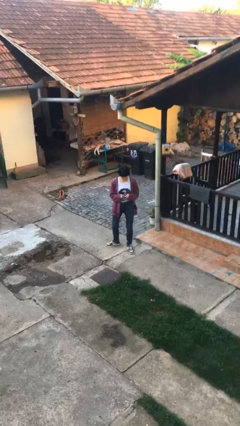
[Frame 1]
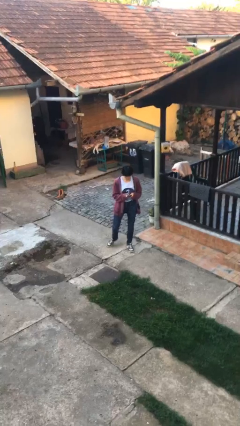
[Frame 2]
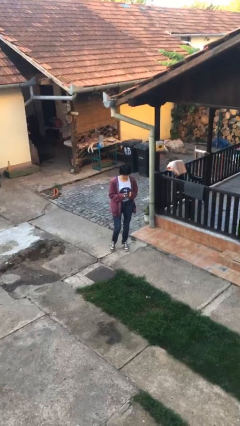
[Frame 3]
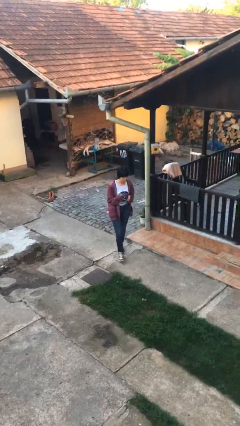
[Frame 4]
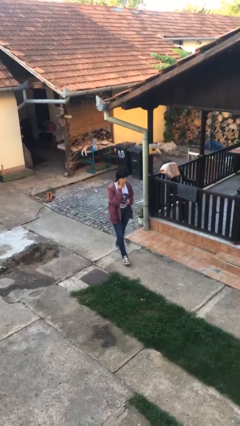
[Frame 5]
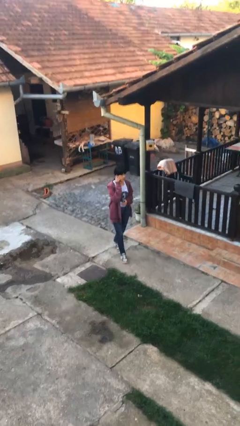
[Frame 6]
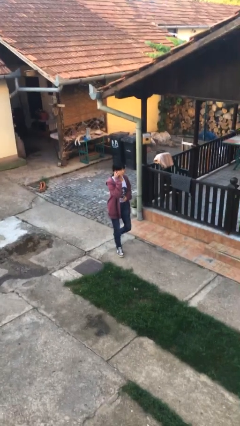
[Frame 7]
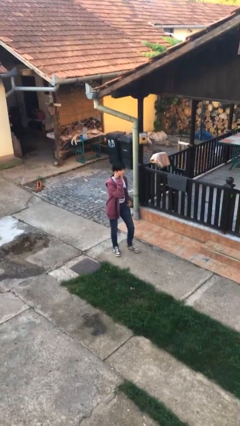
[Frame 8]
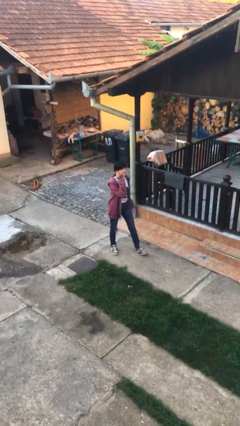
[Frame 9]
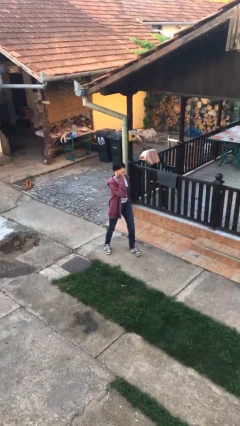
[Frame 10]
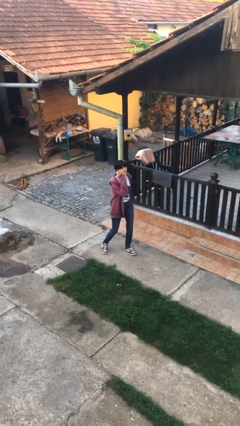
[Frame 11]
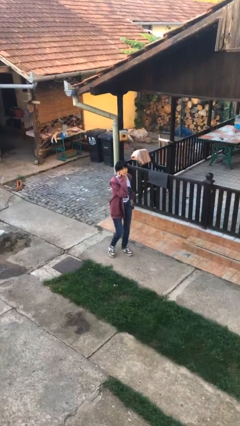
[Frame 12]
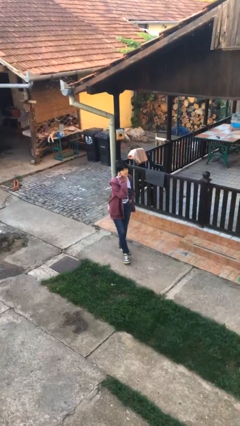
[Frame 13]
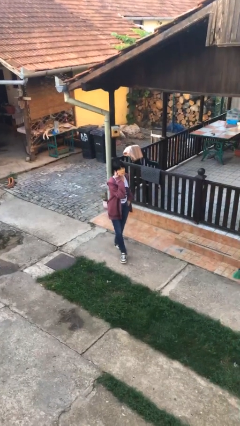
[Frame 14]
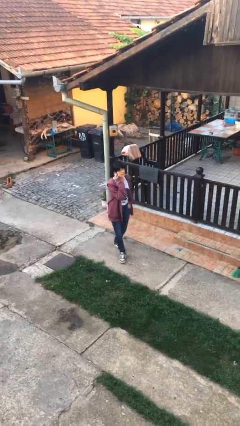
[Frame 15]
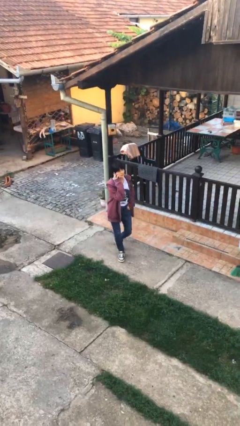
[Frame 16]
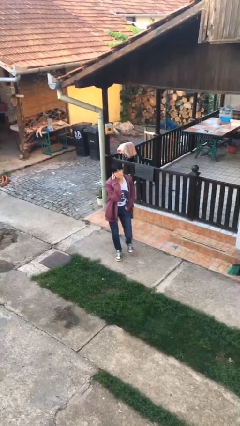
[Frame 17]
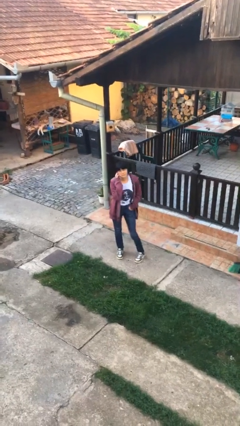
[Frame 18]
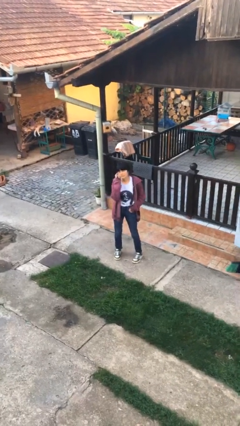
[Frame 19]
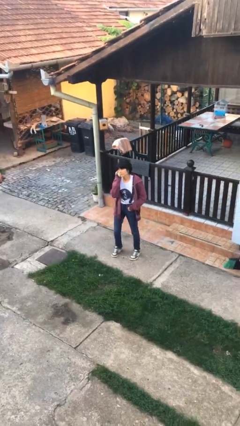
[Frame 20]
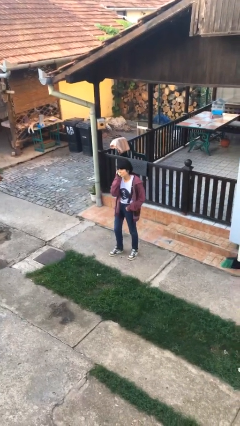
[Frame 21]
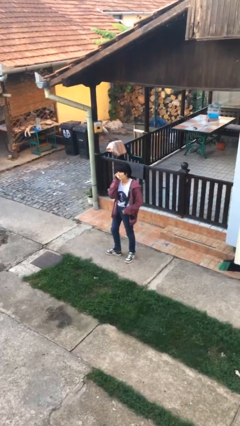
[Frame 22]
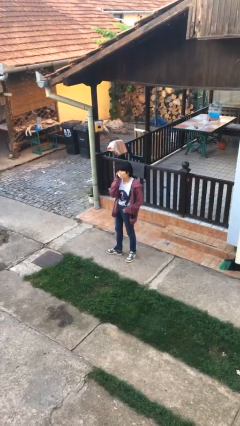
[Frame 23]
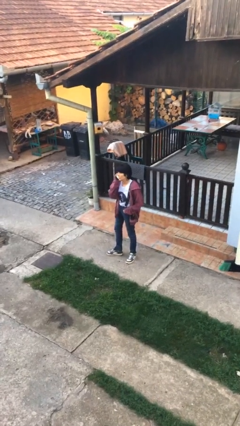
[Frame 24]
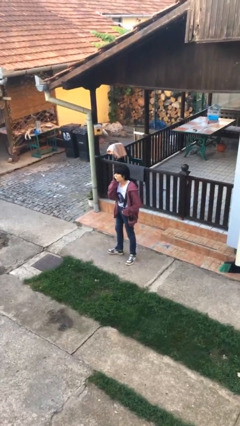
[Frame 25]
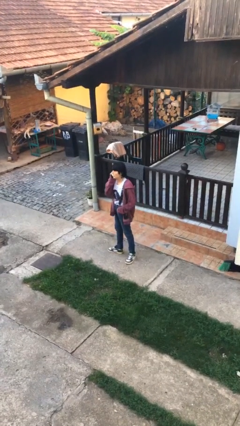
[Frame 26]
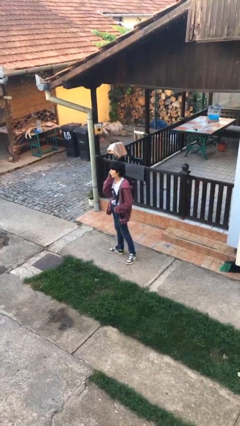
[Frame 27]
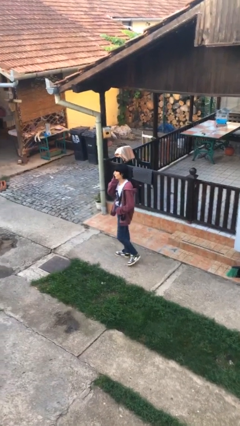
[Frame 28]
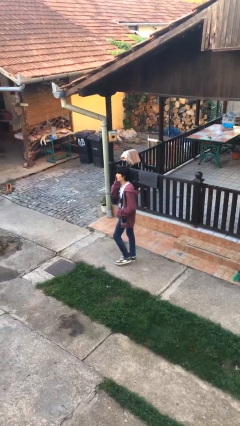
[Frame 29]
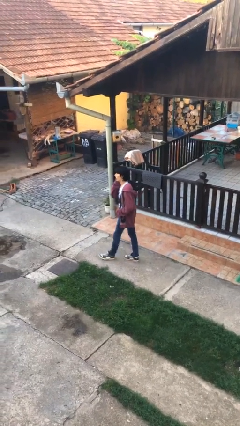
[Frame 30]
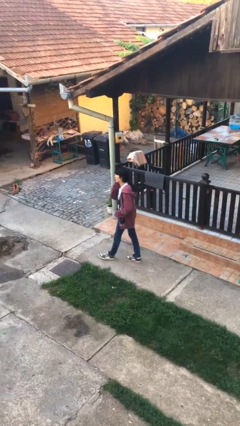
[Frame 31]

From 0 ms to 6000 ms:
person talks on phone

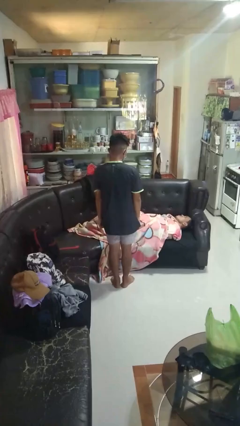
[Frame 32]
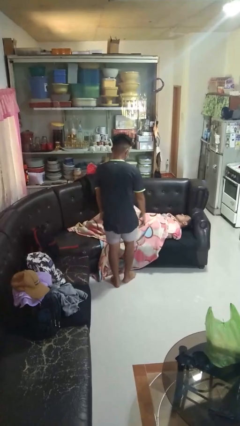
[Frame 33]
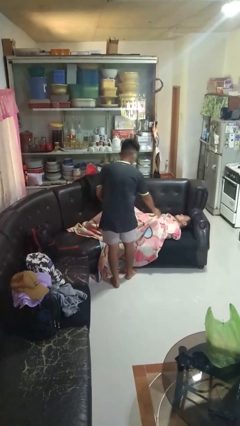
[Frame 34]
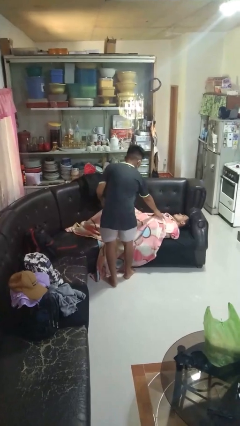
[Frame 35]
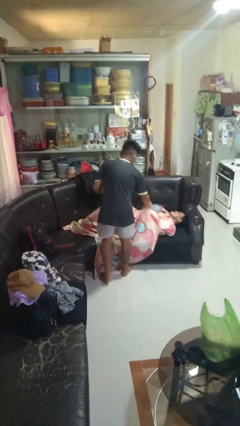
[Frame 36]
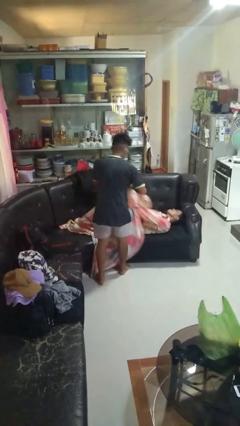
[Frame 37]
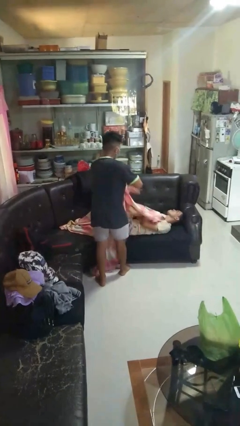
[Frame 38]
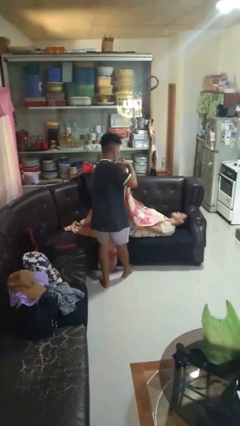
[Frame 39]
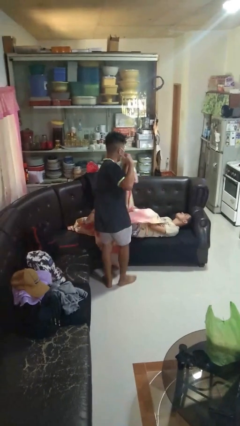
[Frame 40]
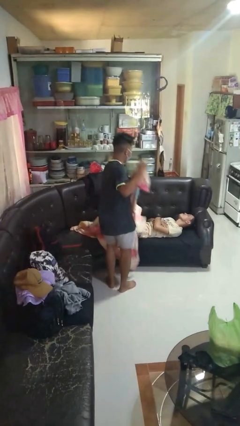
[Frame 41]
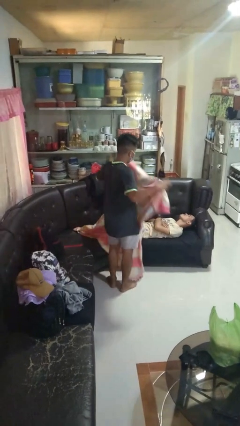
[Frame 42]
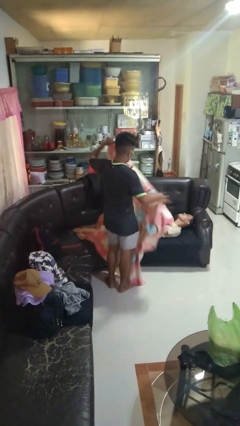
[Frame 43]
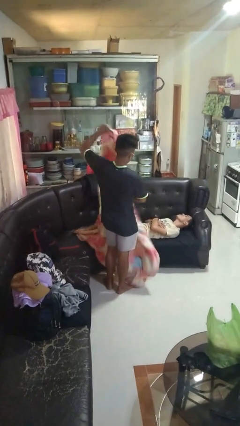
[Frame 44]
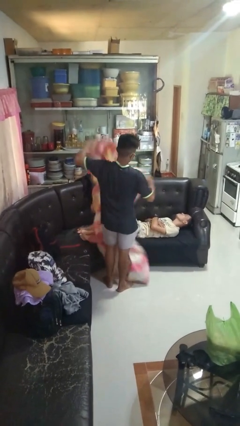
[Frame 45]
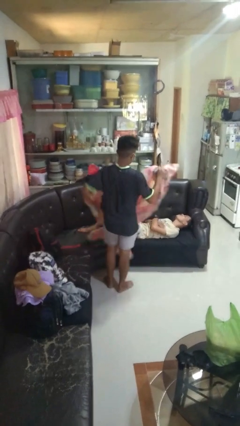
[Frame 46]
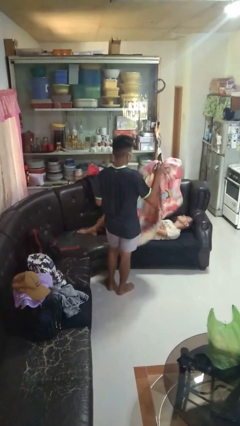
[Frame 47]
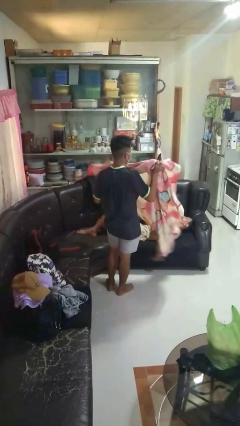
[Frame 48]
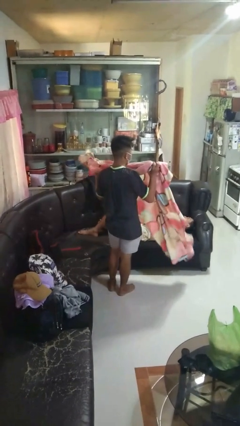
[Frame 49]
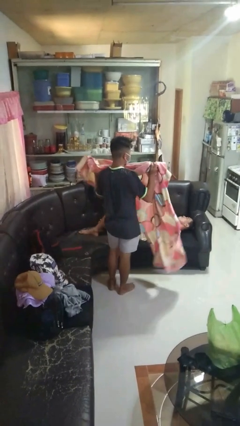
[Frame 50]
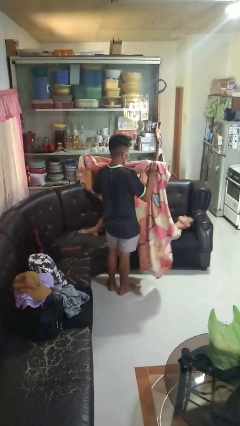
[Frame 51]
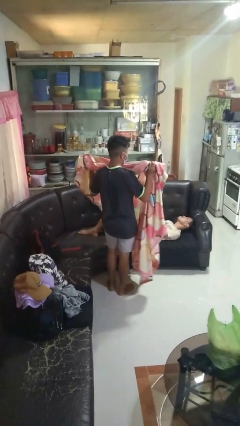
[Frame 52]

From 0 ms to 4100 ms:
person uncovers friend with blanket

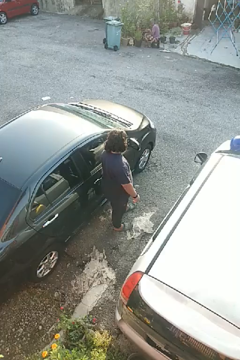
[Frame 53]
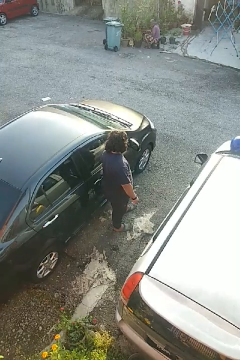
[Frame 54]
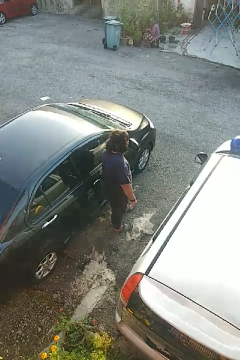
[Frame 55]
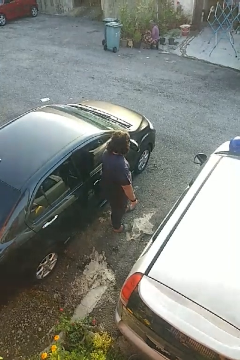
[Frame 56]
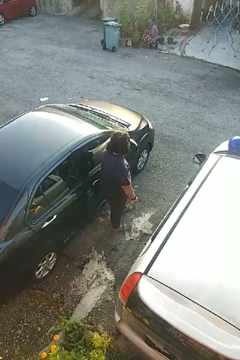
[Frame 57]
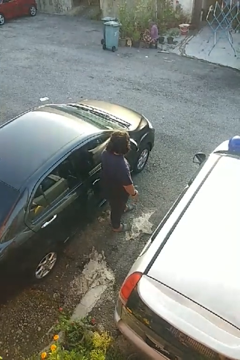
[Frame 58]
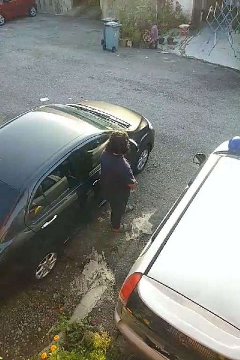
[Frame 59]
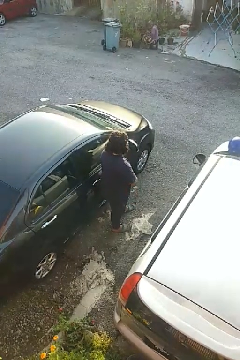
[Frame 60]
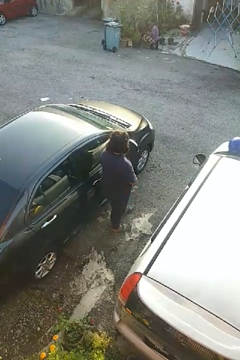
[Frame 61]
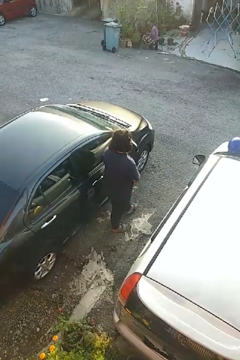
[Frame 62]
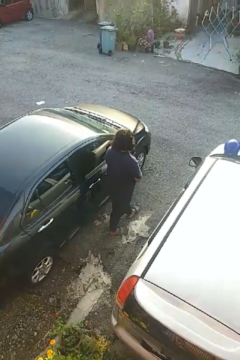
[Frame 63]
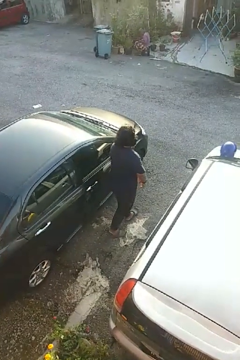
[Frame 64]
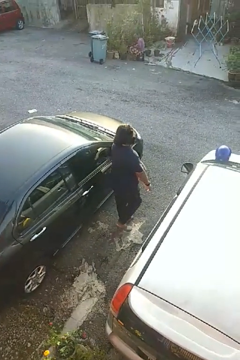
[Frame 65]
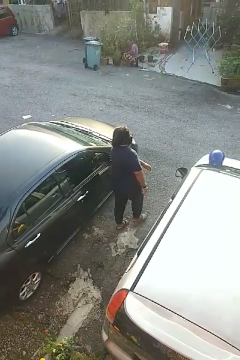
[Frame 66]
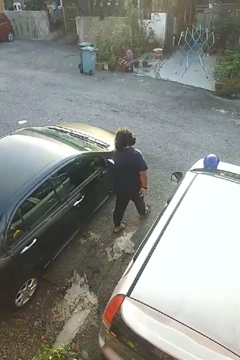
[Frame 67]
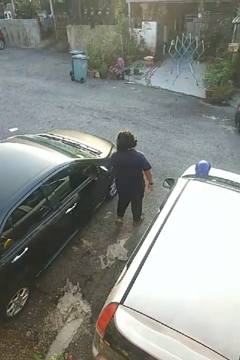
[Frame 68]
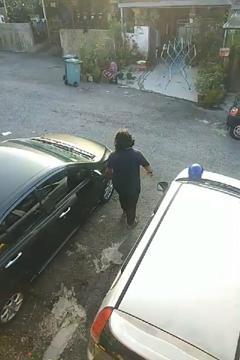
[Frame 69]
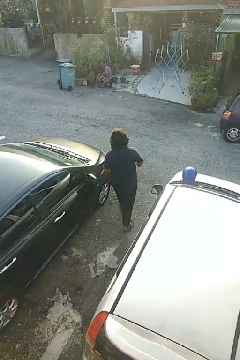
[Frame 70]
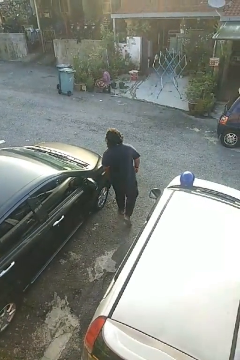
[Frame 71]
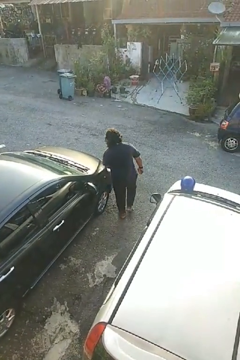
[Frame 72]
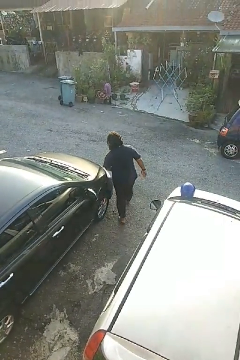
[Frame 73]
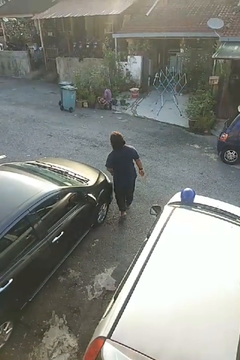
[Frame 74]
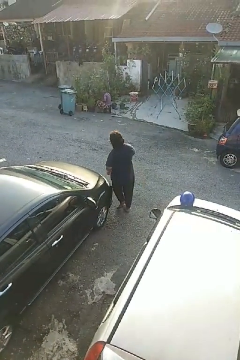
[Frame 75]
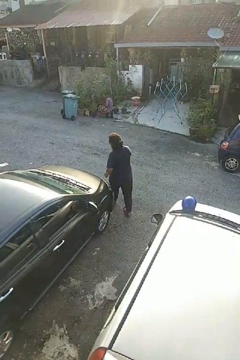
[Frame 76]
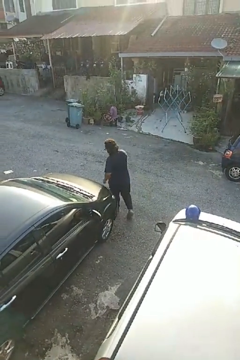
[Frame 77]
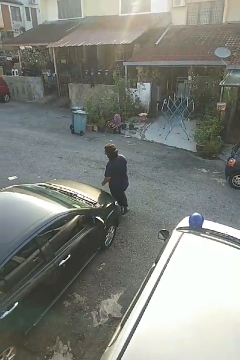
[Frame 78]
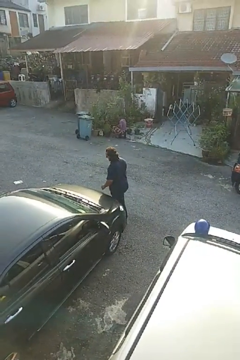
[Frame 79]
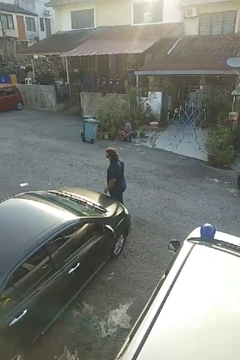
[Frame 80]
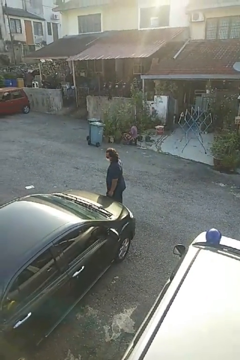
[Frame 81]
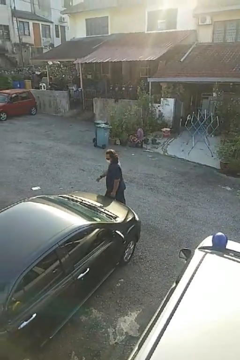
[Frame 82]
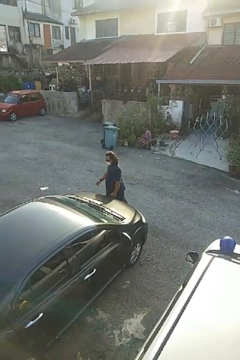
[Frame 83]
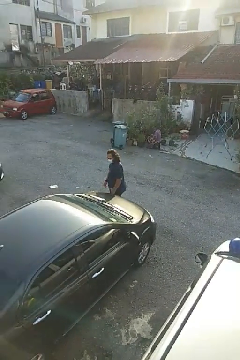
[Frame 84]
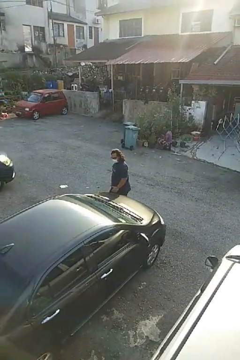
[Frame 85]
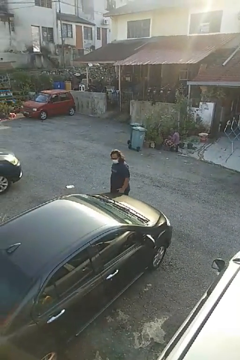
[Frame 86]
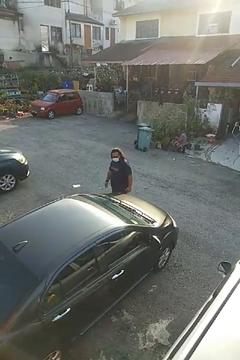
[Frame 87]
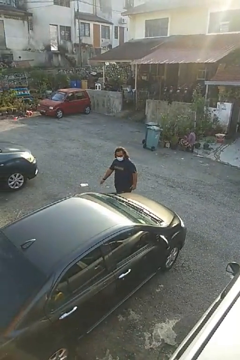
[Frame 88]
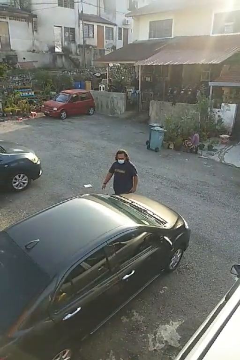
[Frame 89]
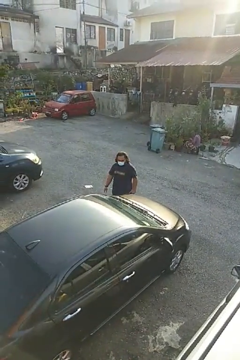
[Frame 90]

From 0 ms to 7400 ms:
person walks around car

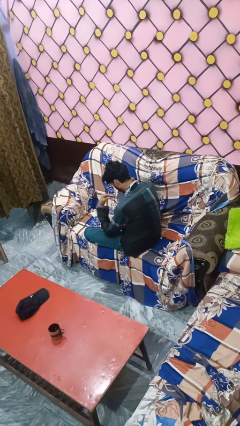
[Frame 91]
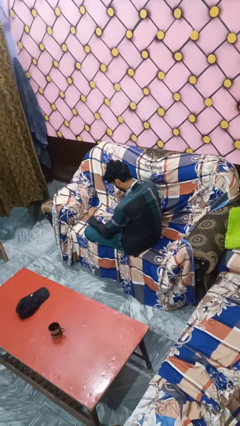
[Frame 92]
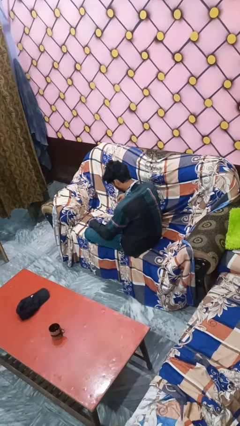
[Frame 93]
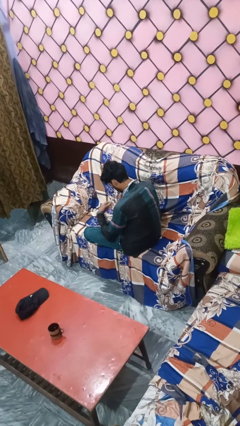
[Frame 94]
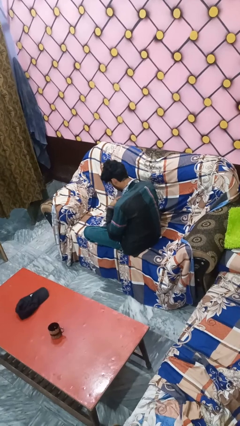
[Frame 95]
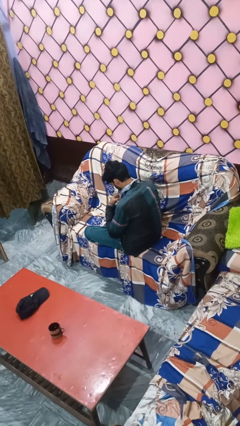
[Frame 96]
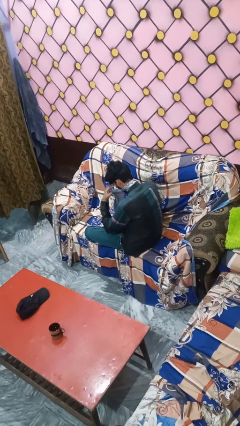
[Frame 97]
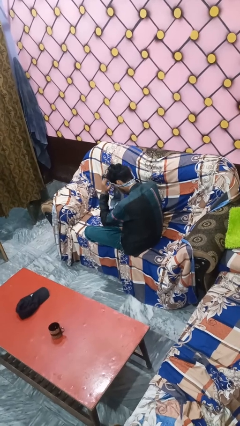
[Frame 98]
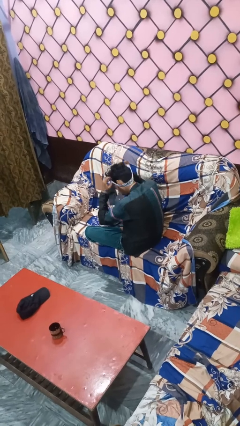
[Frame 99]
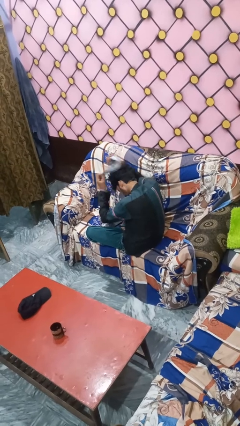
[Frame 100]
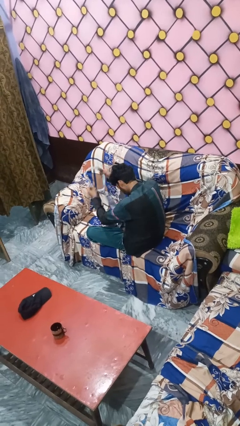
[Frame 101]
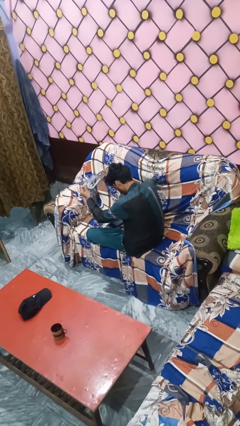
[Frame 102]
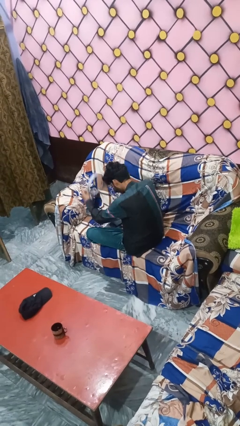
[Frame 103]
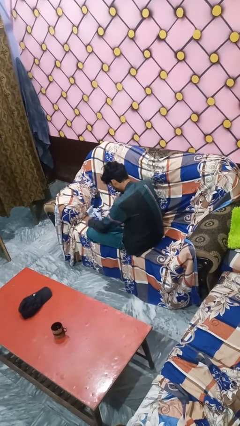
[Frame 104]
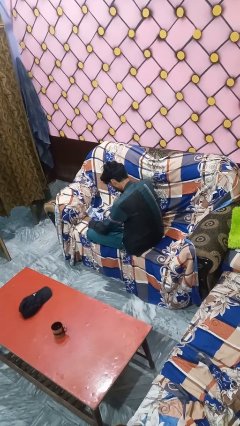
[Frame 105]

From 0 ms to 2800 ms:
person takes off necktie
